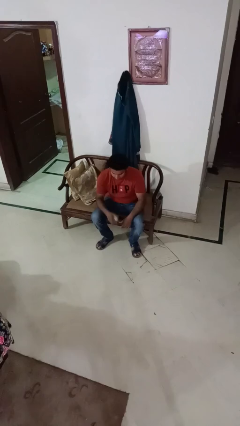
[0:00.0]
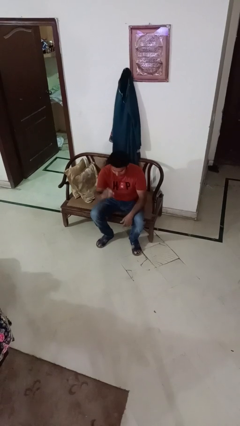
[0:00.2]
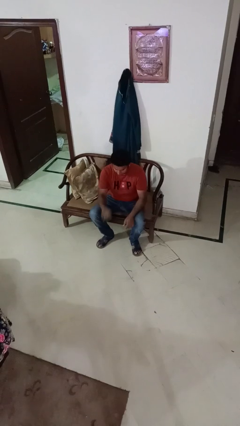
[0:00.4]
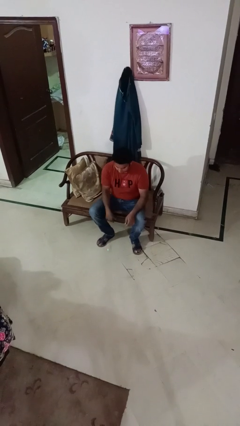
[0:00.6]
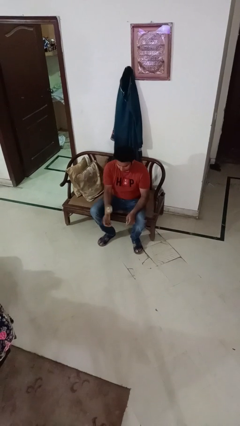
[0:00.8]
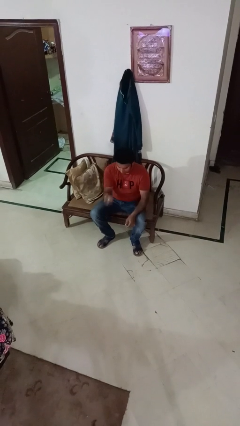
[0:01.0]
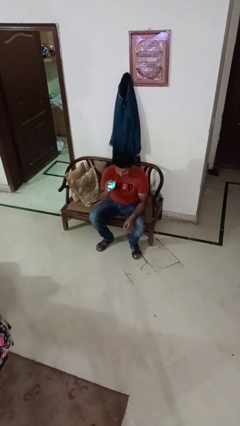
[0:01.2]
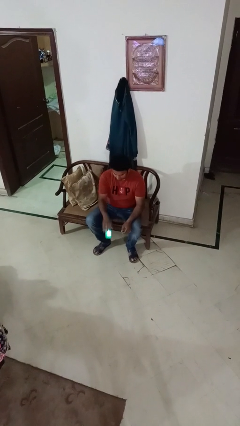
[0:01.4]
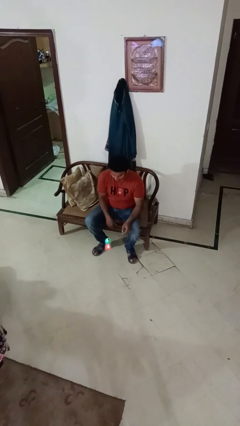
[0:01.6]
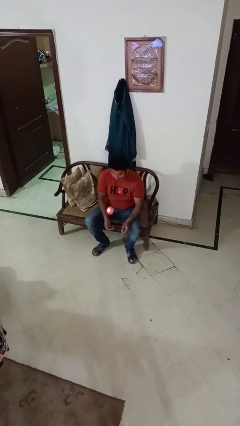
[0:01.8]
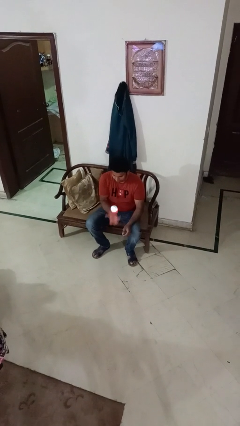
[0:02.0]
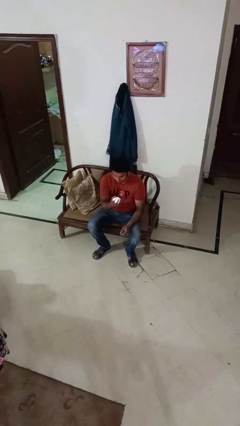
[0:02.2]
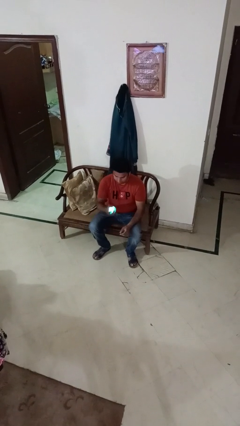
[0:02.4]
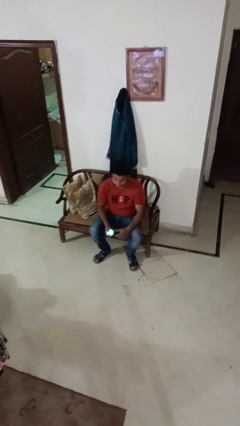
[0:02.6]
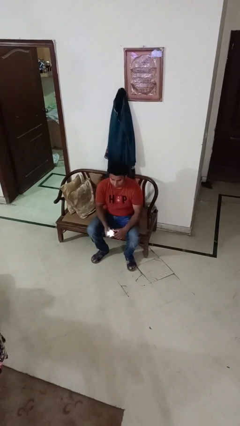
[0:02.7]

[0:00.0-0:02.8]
person bounces ball on floor

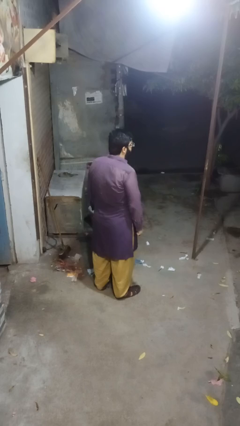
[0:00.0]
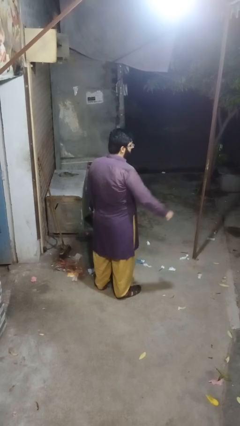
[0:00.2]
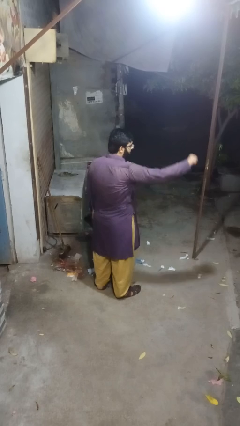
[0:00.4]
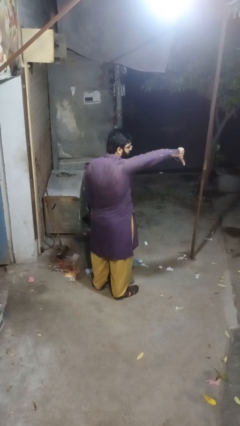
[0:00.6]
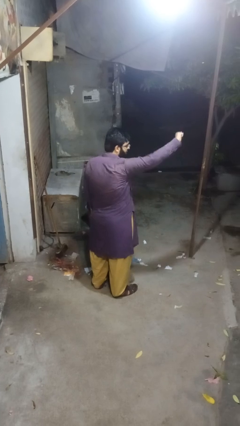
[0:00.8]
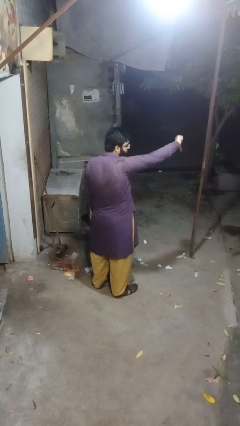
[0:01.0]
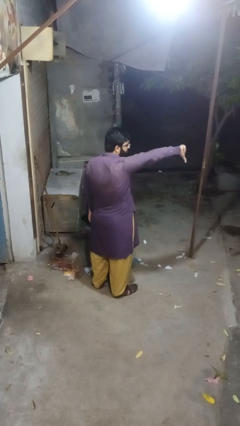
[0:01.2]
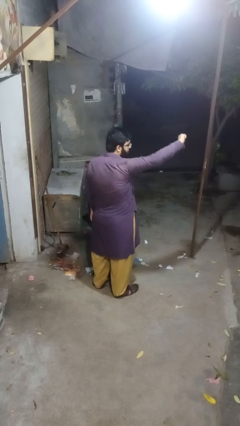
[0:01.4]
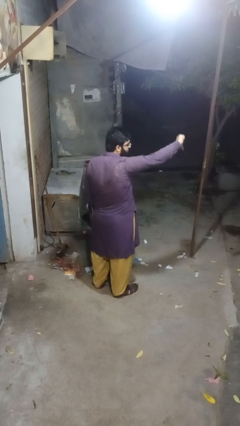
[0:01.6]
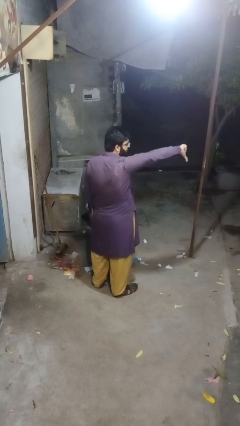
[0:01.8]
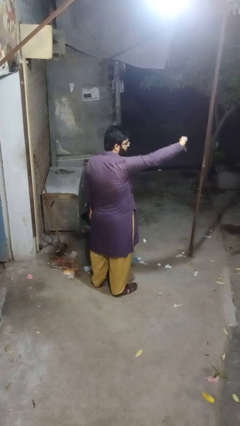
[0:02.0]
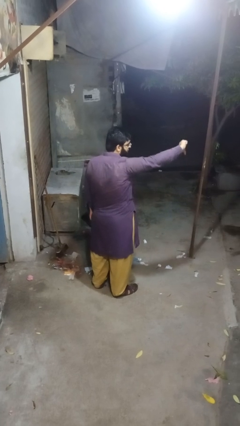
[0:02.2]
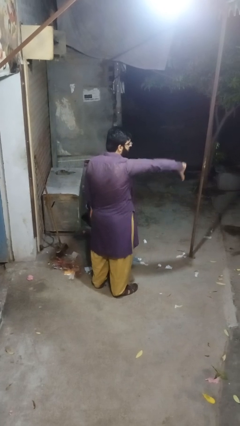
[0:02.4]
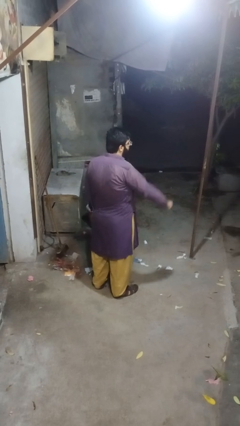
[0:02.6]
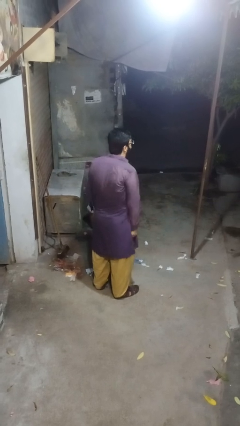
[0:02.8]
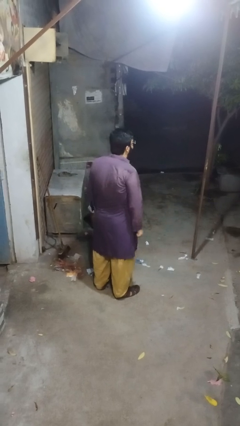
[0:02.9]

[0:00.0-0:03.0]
person gestures thumbs down

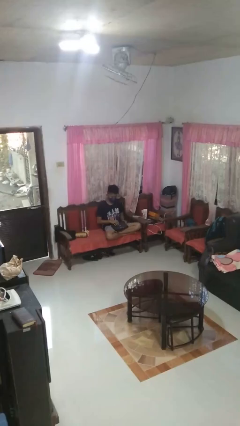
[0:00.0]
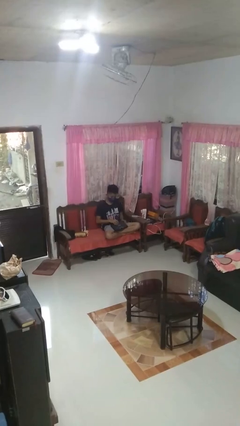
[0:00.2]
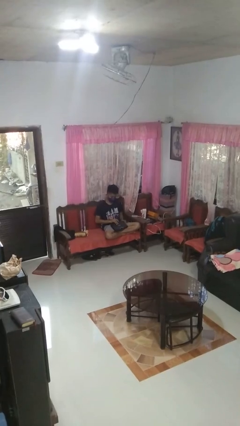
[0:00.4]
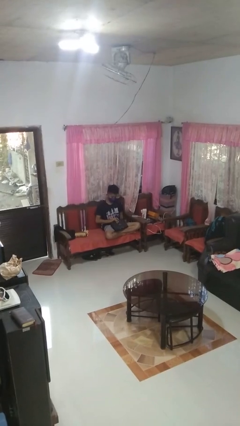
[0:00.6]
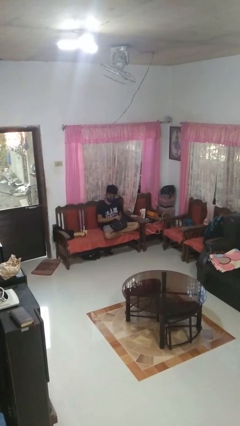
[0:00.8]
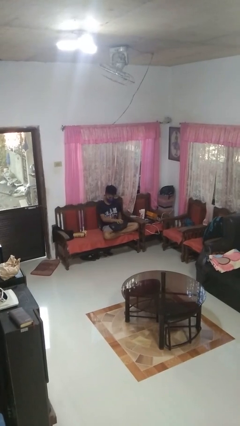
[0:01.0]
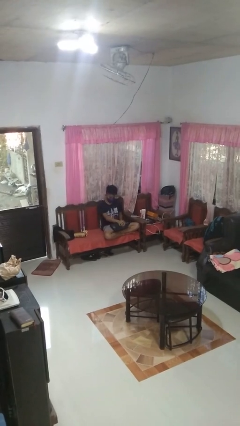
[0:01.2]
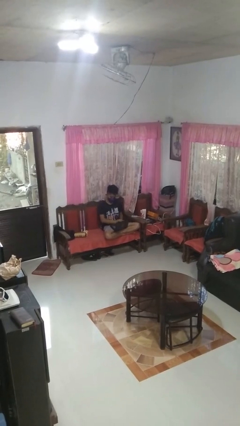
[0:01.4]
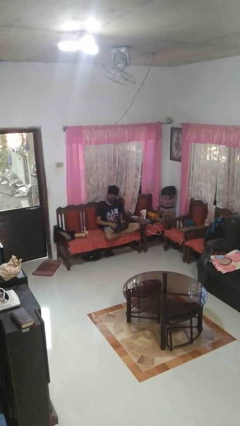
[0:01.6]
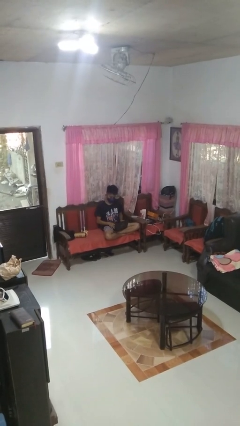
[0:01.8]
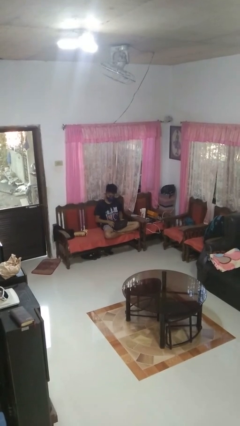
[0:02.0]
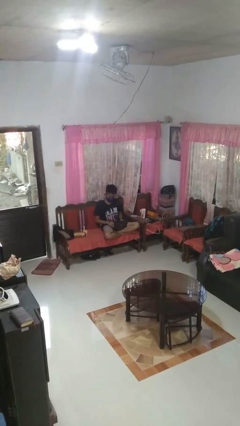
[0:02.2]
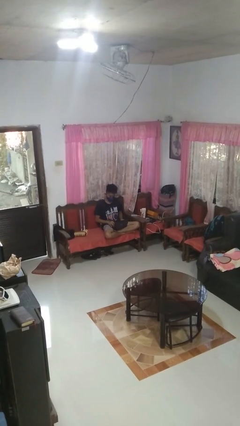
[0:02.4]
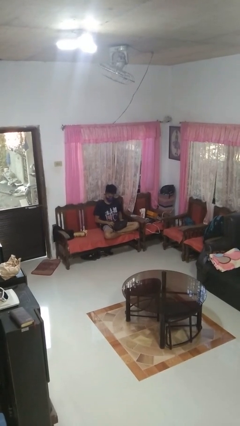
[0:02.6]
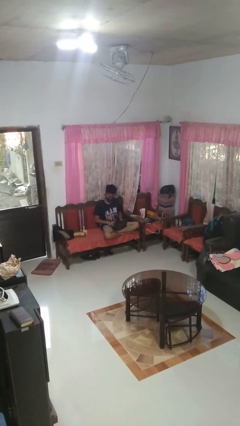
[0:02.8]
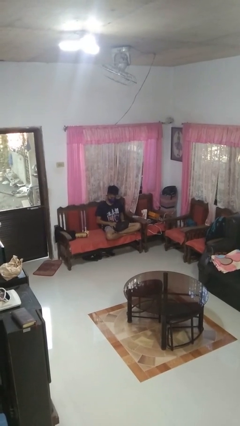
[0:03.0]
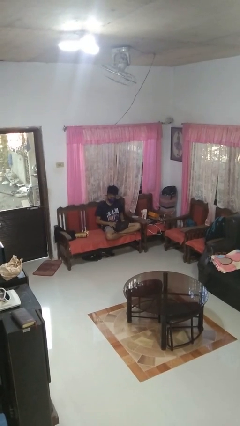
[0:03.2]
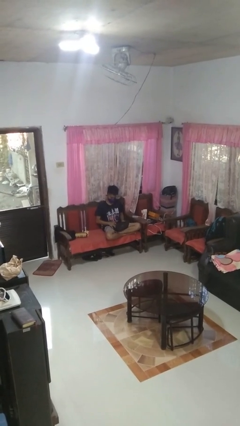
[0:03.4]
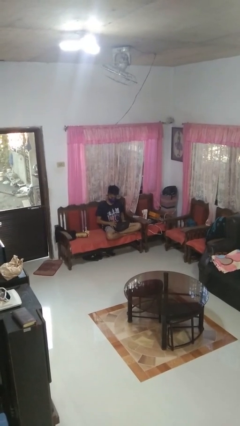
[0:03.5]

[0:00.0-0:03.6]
person opens laptop

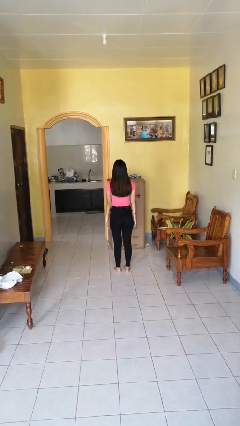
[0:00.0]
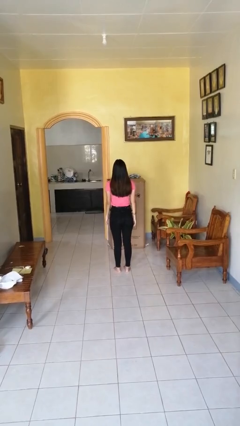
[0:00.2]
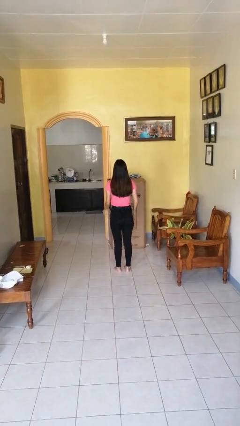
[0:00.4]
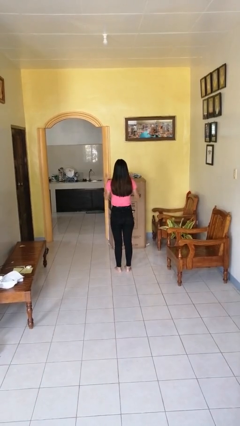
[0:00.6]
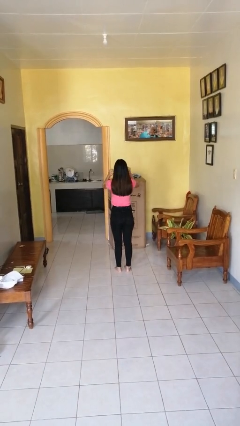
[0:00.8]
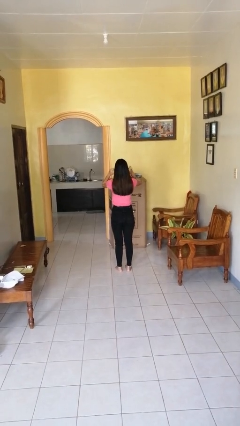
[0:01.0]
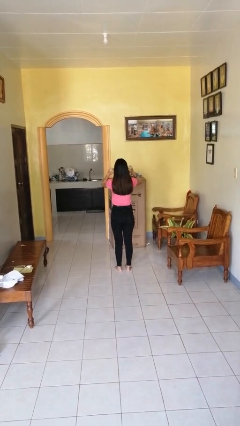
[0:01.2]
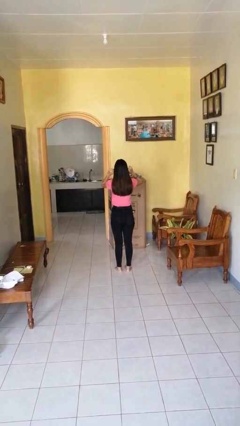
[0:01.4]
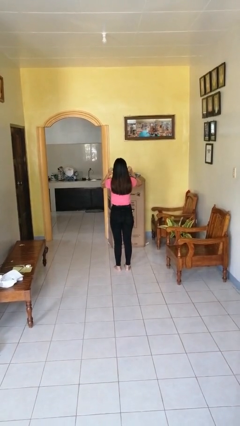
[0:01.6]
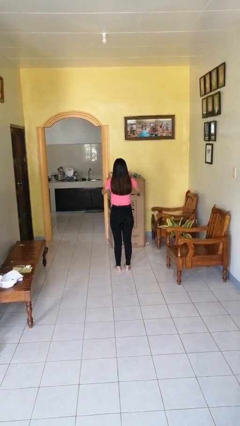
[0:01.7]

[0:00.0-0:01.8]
person puts fingers in ear

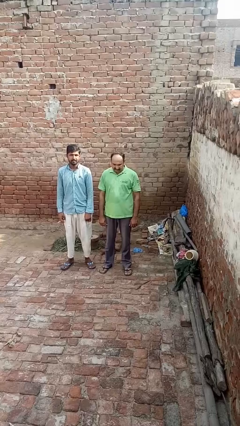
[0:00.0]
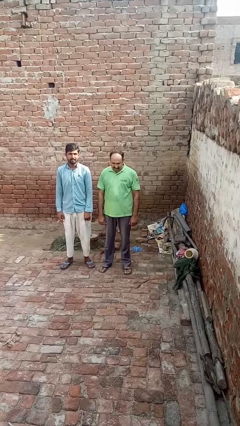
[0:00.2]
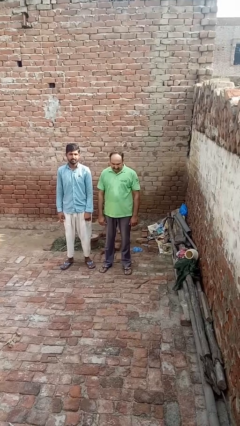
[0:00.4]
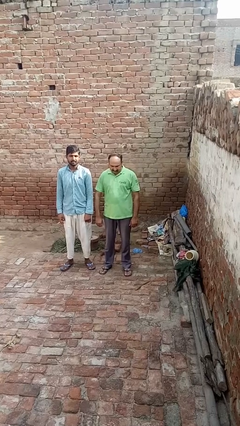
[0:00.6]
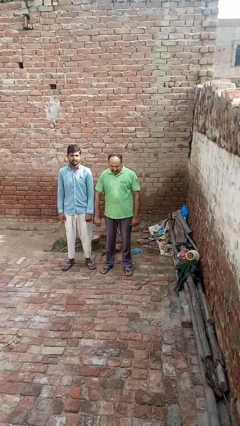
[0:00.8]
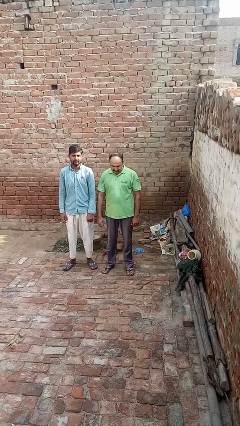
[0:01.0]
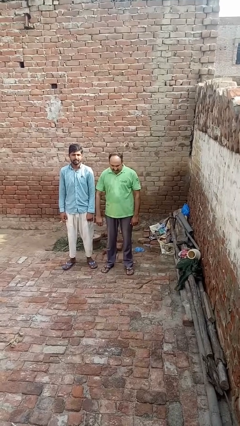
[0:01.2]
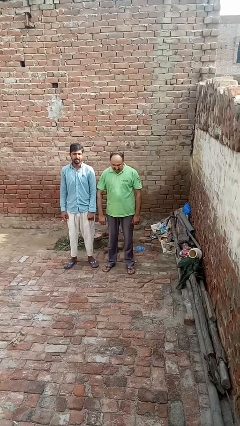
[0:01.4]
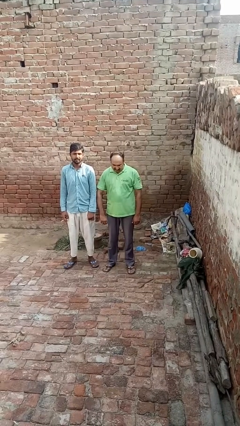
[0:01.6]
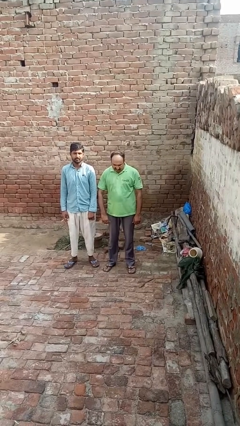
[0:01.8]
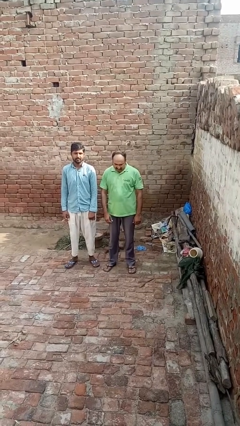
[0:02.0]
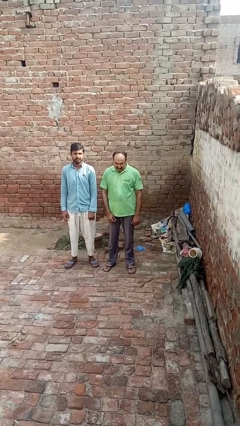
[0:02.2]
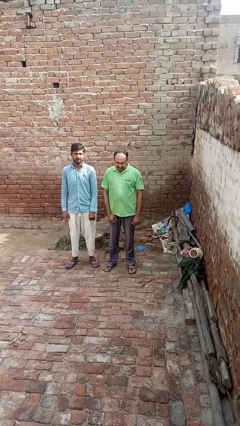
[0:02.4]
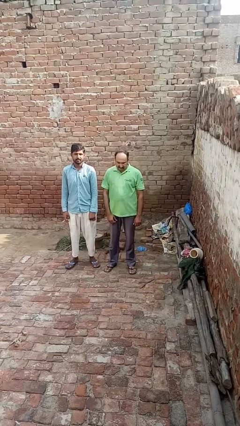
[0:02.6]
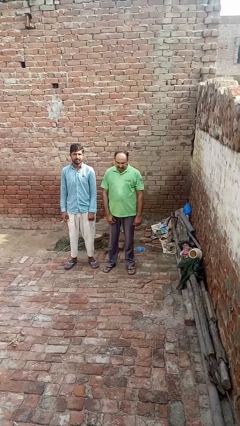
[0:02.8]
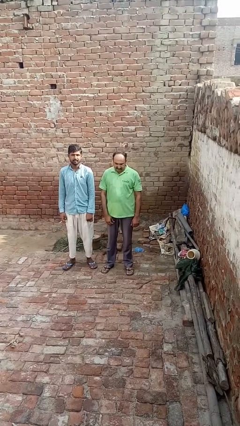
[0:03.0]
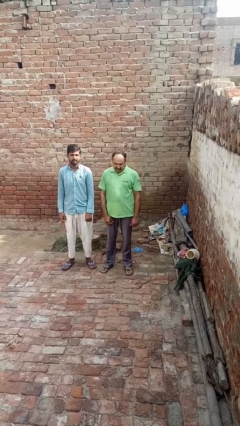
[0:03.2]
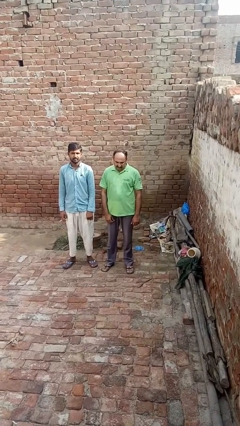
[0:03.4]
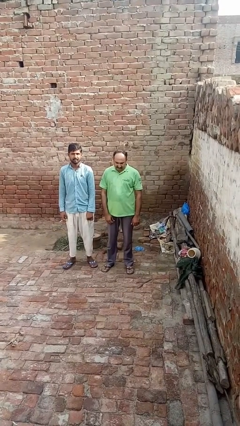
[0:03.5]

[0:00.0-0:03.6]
person nudges person with elbow

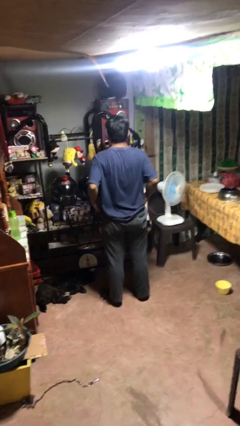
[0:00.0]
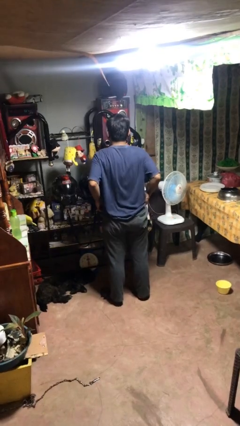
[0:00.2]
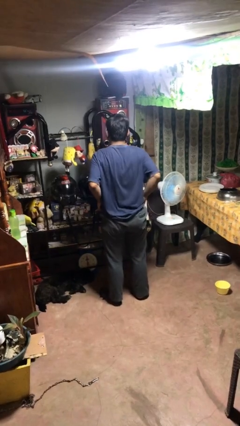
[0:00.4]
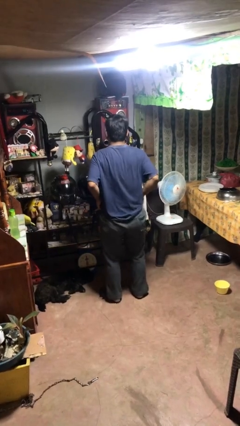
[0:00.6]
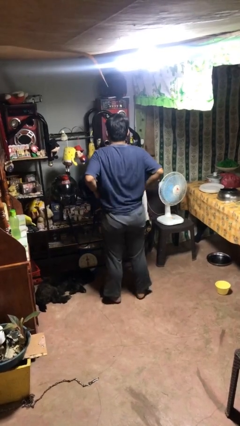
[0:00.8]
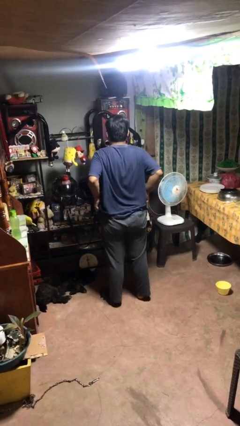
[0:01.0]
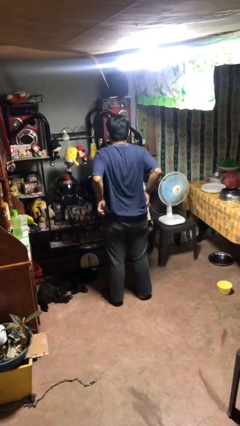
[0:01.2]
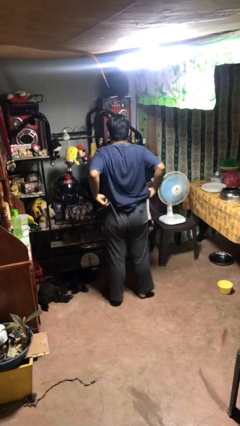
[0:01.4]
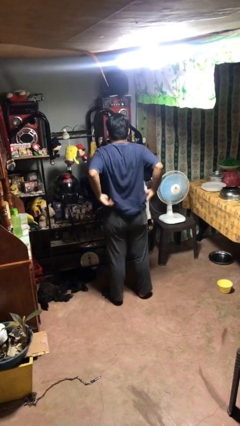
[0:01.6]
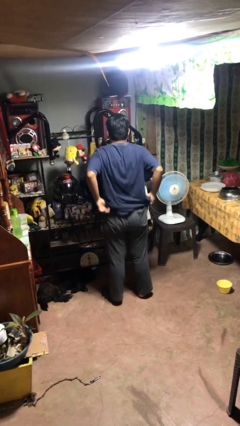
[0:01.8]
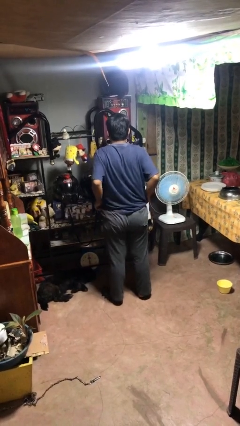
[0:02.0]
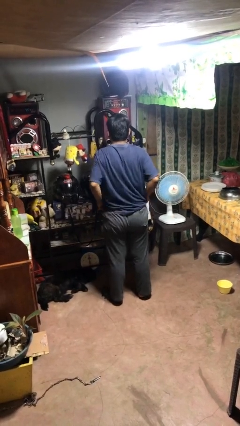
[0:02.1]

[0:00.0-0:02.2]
person hikes up pants
